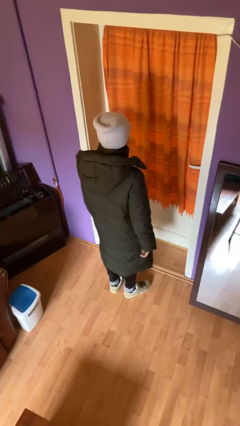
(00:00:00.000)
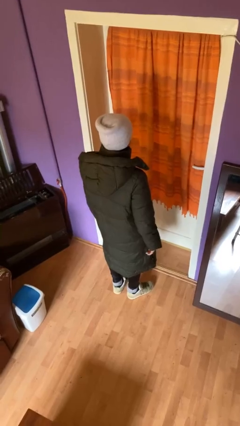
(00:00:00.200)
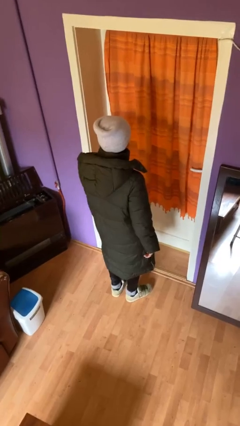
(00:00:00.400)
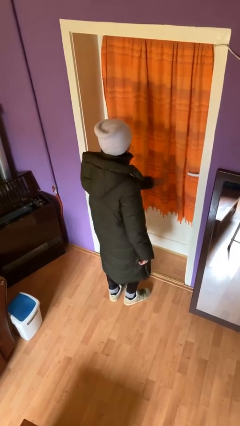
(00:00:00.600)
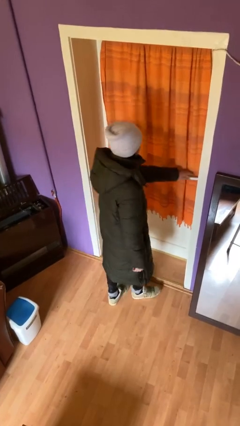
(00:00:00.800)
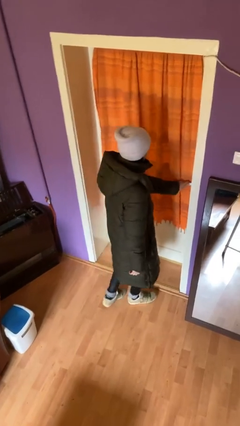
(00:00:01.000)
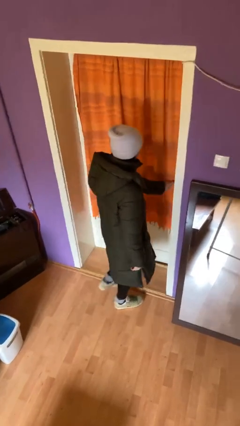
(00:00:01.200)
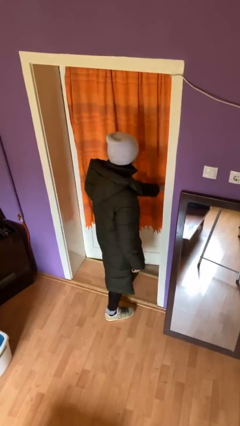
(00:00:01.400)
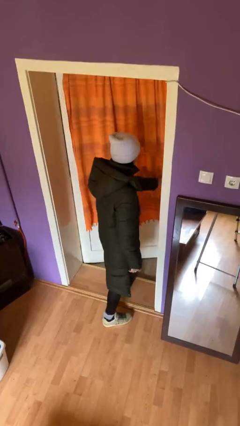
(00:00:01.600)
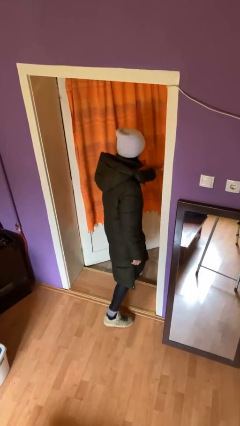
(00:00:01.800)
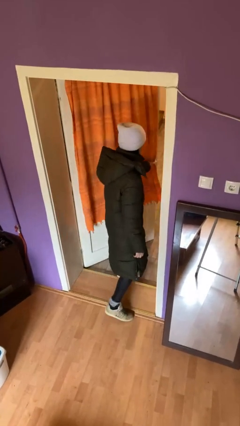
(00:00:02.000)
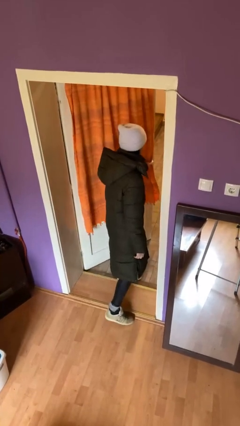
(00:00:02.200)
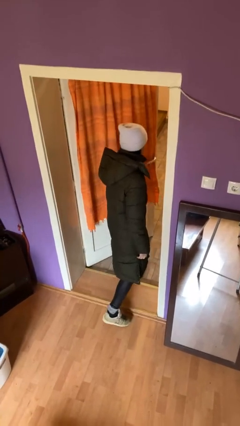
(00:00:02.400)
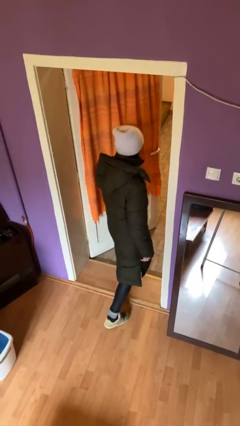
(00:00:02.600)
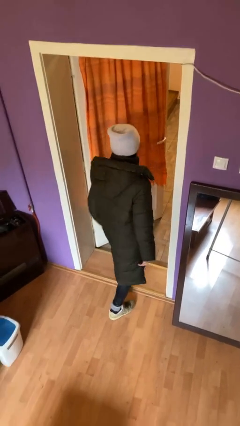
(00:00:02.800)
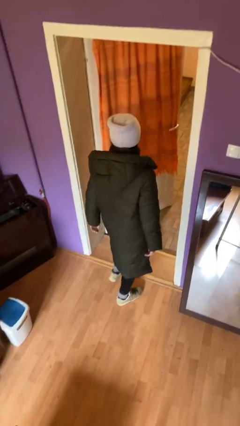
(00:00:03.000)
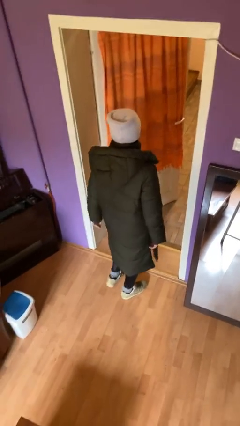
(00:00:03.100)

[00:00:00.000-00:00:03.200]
person opens facility door

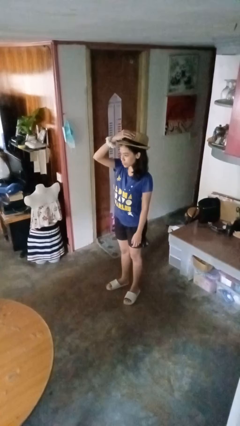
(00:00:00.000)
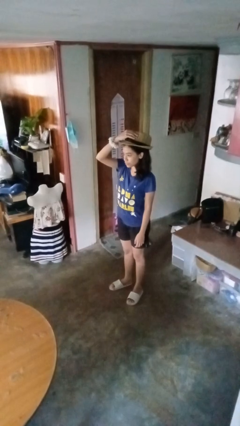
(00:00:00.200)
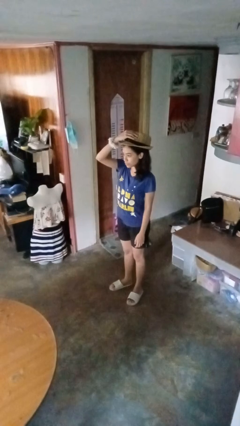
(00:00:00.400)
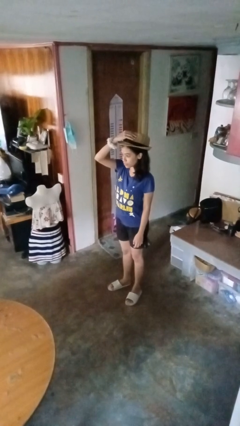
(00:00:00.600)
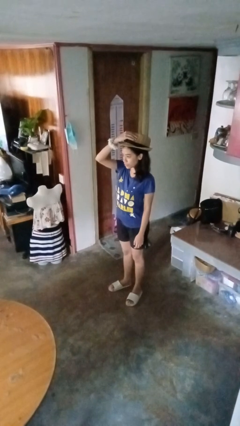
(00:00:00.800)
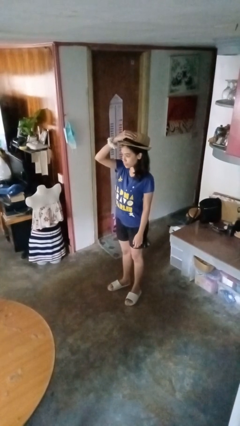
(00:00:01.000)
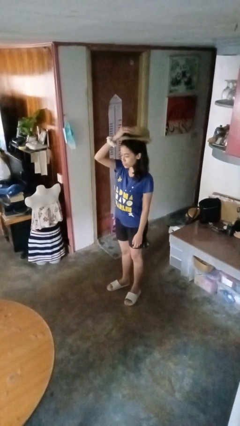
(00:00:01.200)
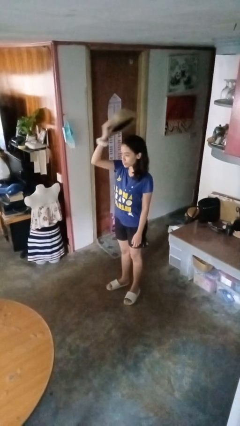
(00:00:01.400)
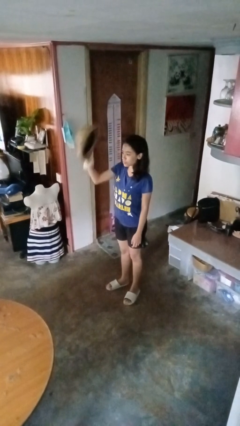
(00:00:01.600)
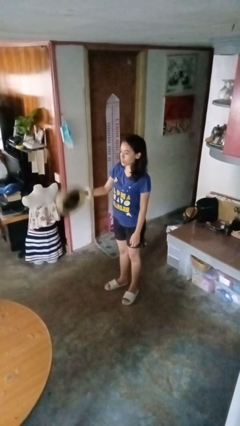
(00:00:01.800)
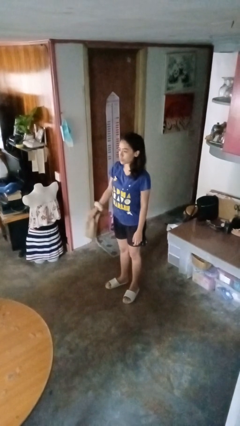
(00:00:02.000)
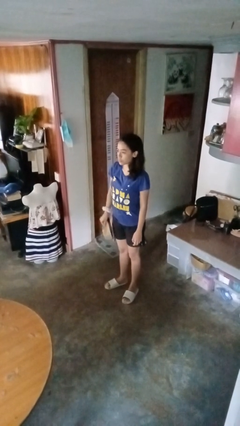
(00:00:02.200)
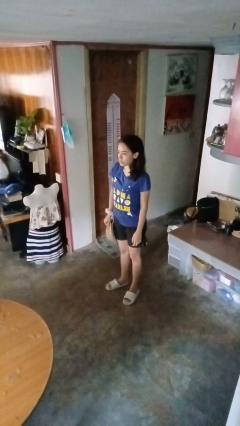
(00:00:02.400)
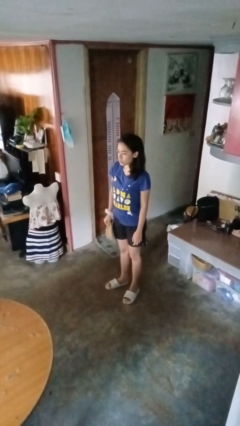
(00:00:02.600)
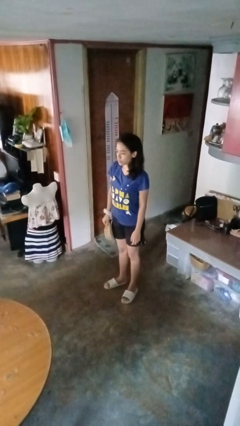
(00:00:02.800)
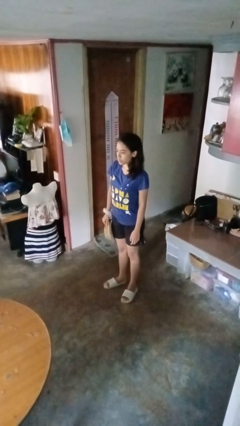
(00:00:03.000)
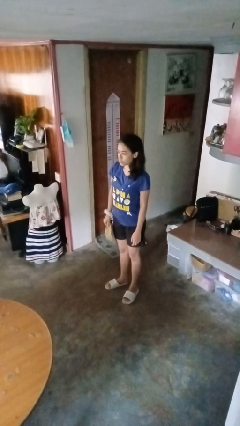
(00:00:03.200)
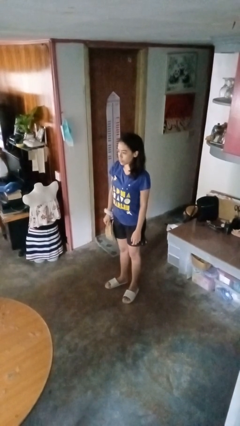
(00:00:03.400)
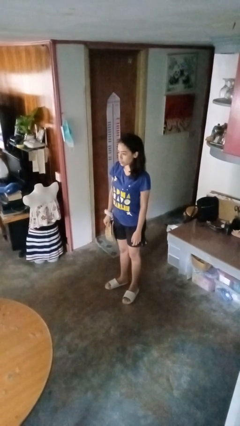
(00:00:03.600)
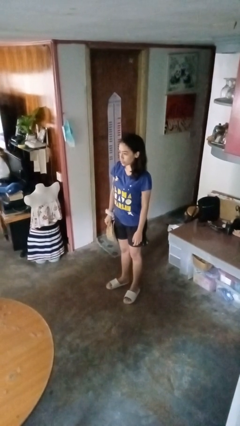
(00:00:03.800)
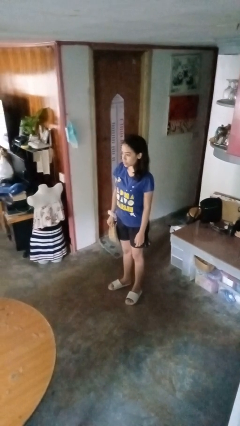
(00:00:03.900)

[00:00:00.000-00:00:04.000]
person takes off hat

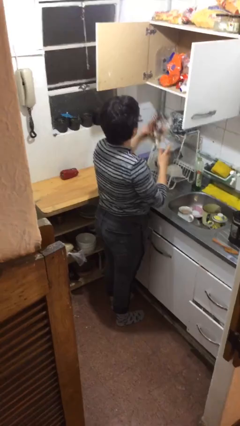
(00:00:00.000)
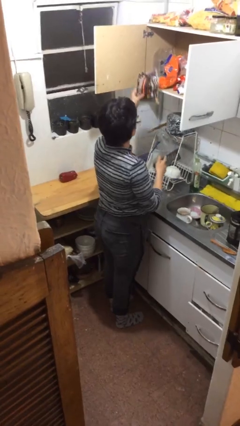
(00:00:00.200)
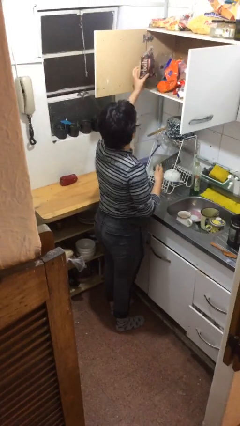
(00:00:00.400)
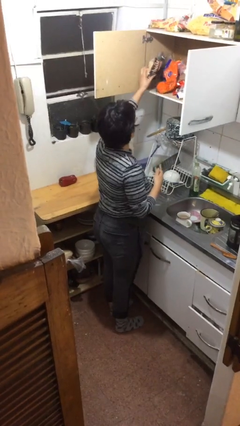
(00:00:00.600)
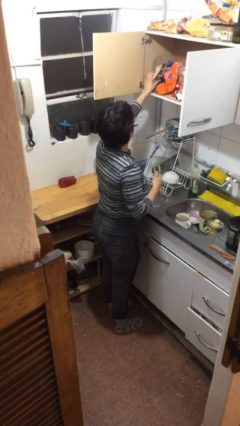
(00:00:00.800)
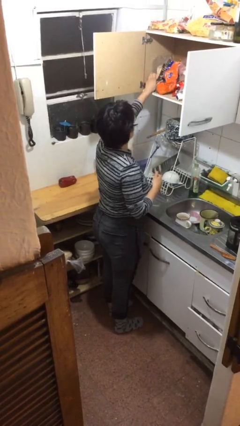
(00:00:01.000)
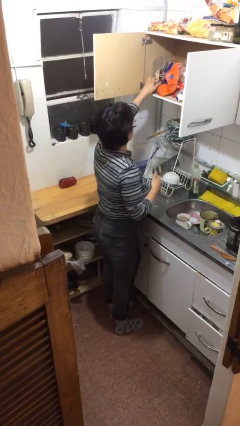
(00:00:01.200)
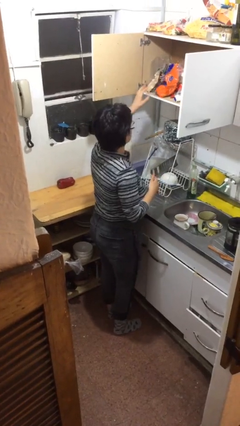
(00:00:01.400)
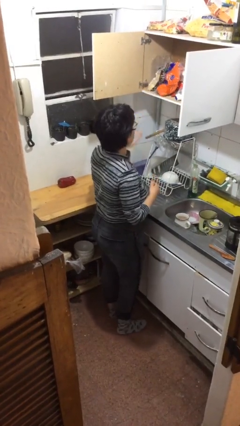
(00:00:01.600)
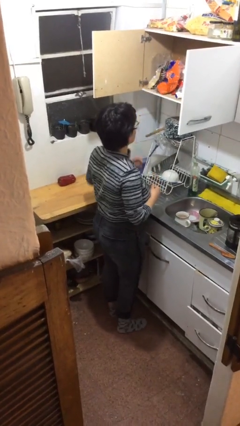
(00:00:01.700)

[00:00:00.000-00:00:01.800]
person puts object in cabinet

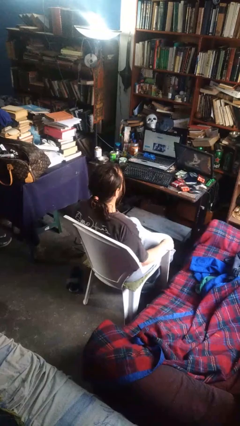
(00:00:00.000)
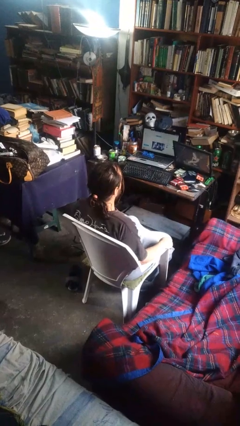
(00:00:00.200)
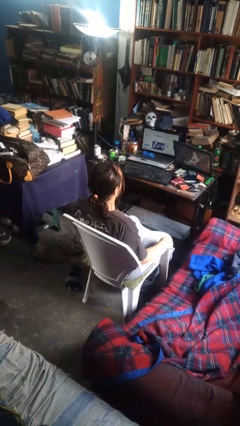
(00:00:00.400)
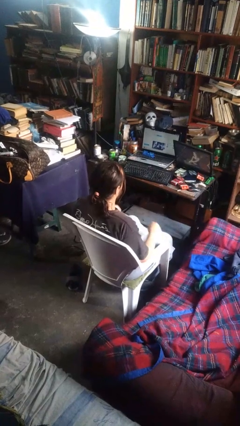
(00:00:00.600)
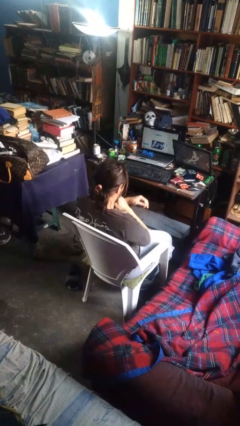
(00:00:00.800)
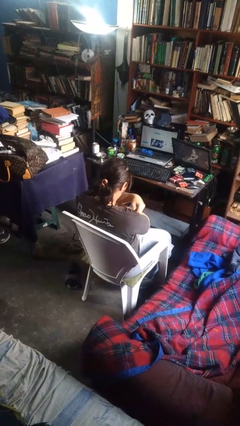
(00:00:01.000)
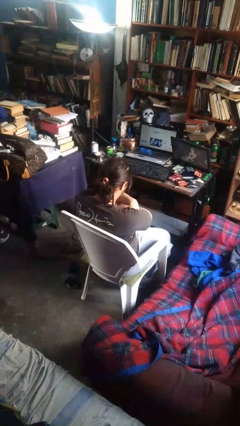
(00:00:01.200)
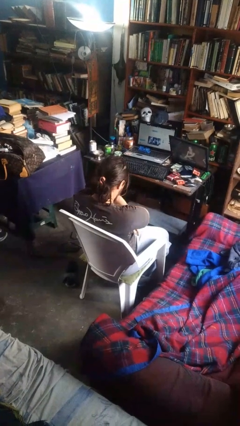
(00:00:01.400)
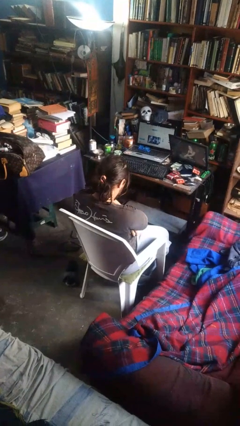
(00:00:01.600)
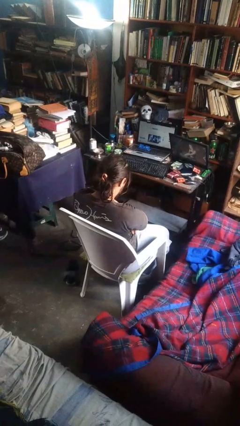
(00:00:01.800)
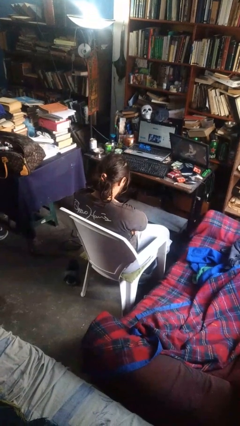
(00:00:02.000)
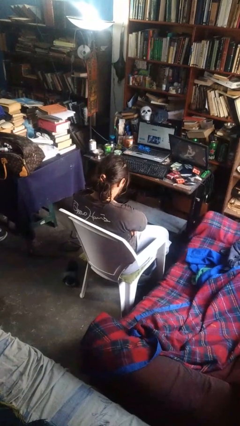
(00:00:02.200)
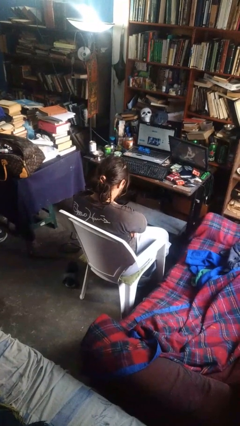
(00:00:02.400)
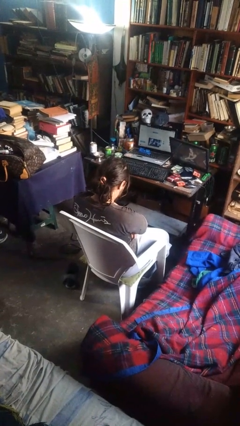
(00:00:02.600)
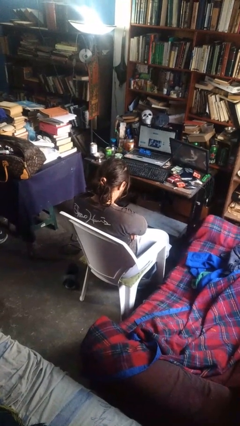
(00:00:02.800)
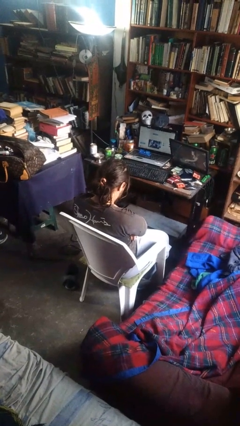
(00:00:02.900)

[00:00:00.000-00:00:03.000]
person crosses arms

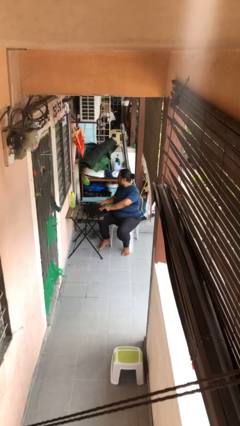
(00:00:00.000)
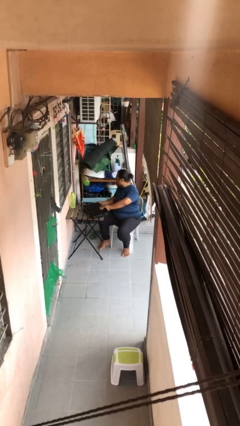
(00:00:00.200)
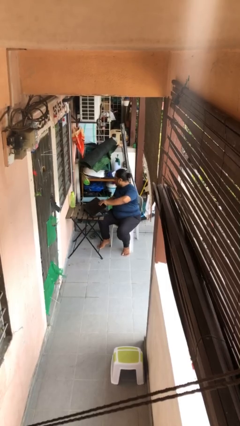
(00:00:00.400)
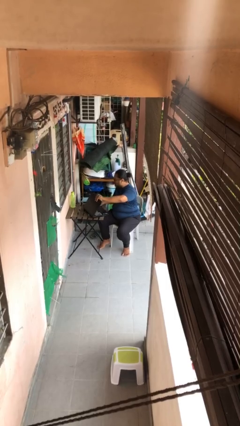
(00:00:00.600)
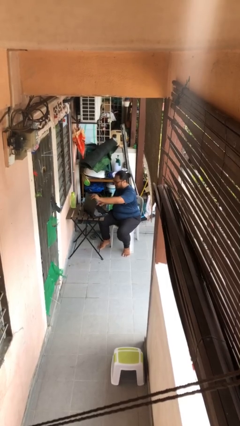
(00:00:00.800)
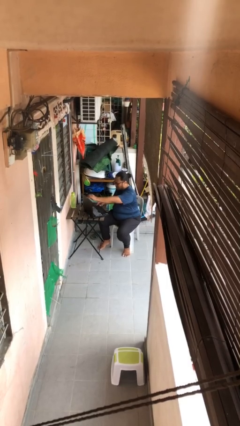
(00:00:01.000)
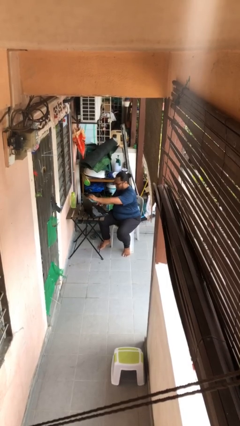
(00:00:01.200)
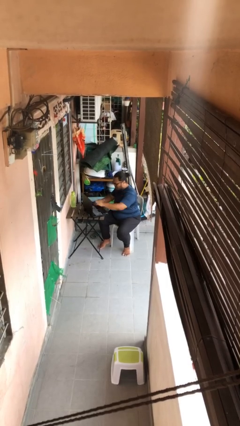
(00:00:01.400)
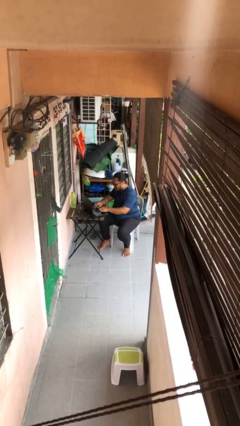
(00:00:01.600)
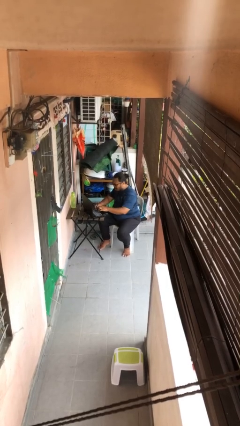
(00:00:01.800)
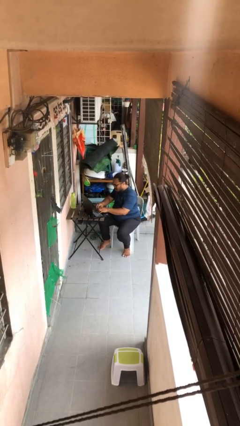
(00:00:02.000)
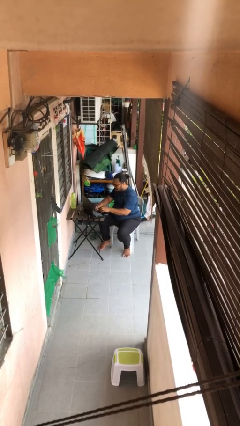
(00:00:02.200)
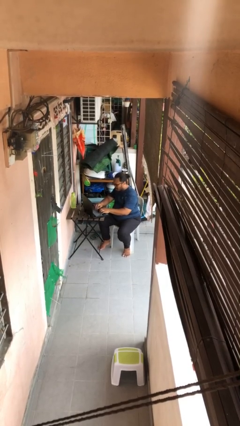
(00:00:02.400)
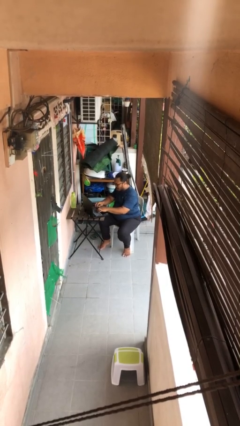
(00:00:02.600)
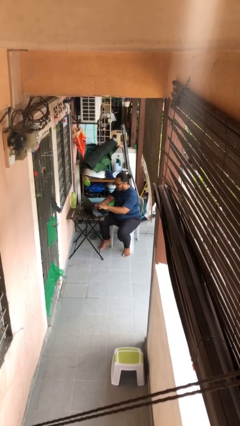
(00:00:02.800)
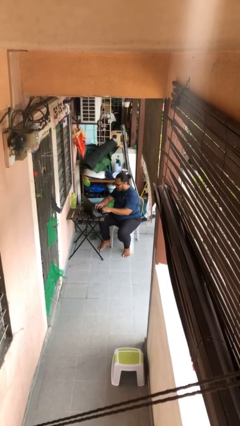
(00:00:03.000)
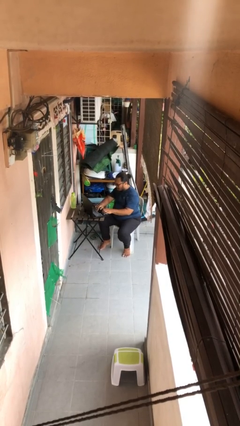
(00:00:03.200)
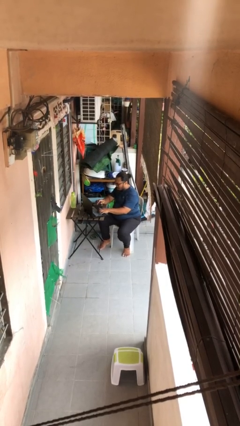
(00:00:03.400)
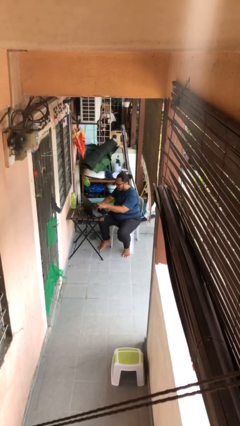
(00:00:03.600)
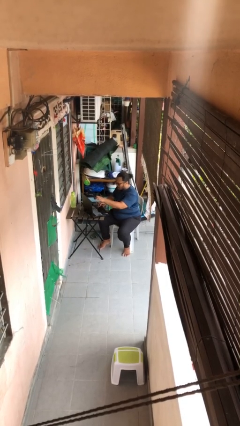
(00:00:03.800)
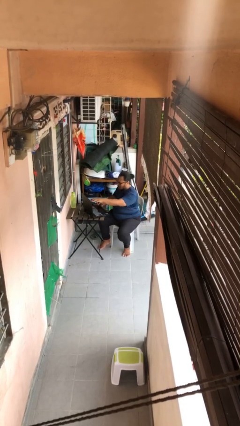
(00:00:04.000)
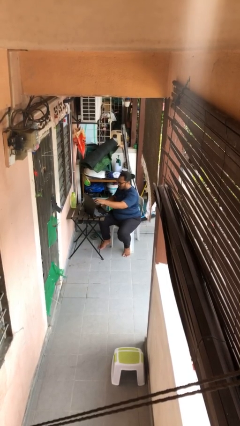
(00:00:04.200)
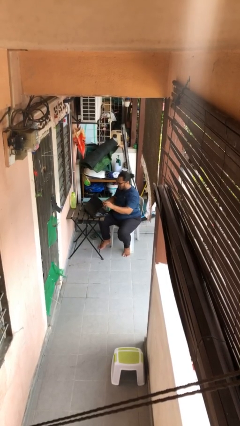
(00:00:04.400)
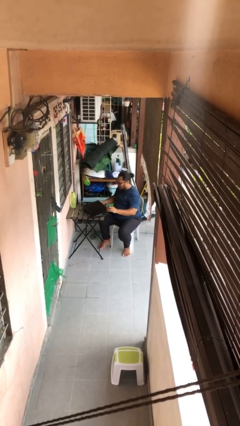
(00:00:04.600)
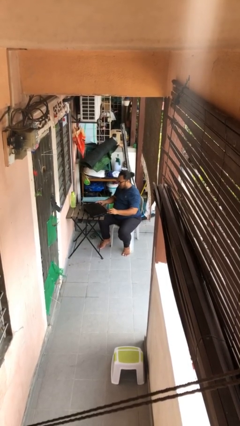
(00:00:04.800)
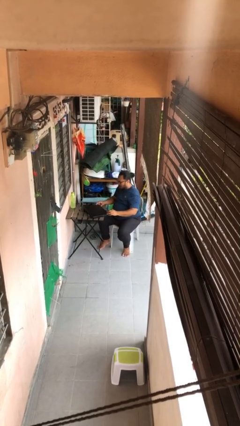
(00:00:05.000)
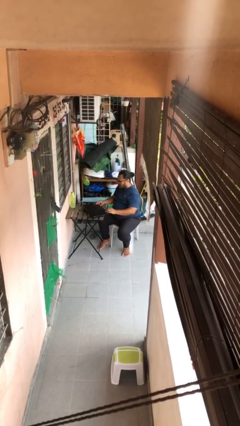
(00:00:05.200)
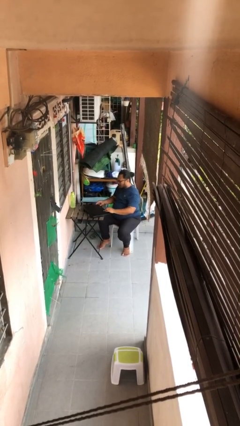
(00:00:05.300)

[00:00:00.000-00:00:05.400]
person interacts with laptop
